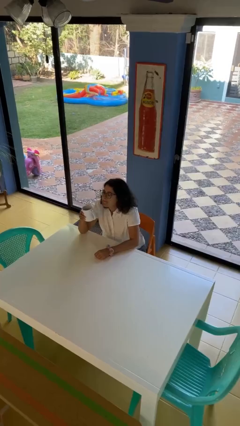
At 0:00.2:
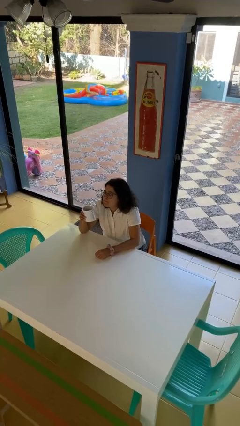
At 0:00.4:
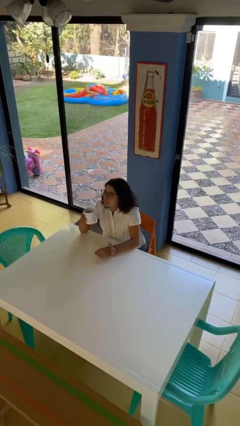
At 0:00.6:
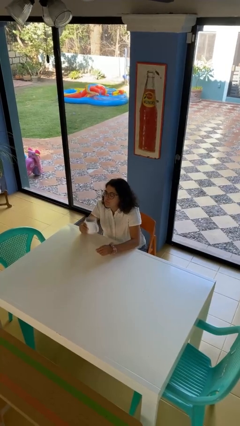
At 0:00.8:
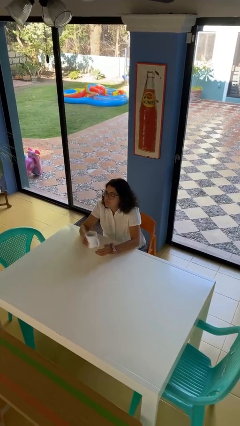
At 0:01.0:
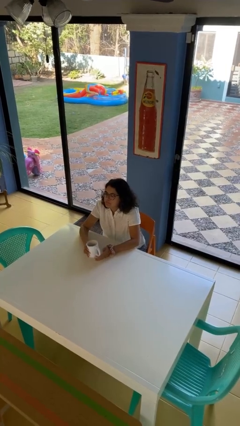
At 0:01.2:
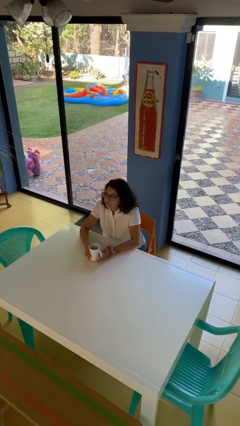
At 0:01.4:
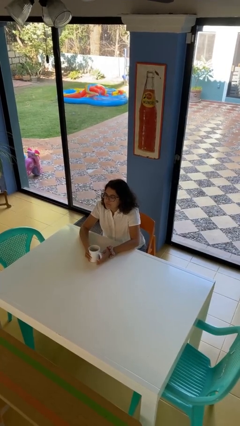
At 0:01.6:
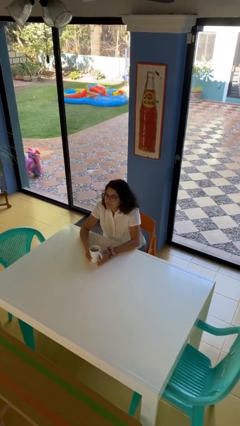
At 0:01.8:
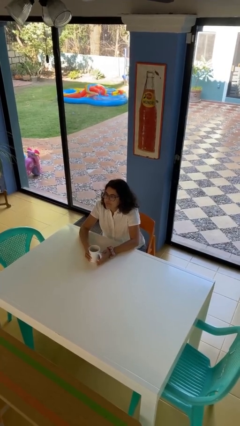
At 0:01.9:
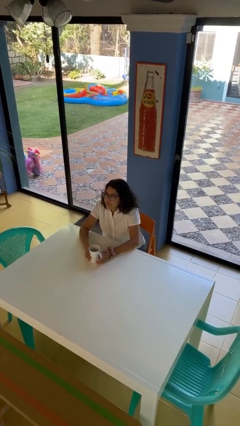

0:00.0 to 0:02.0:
person puts down object on table

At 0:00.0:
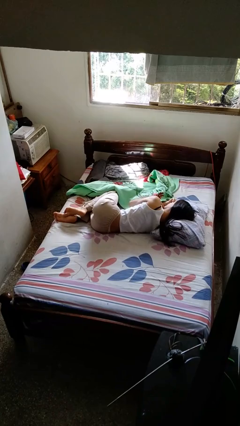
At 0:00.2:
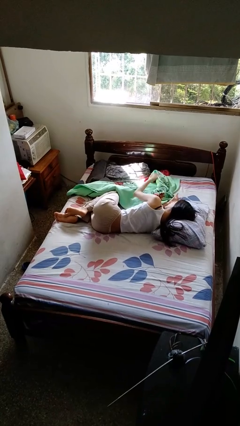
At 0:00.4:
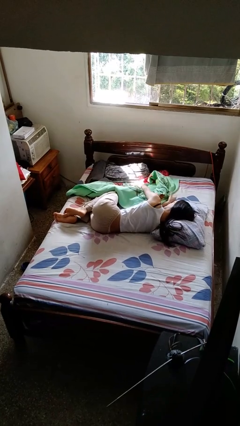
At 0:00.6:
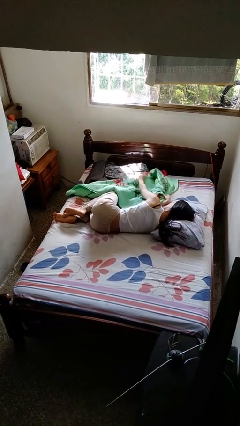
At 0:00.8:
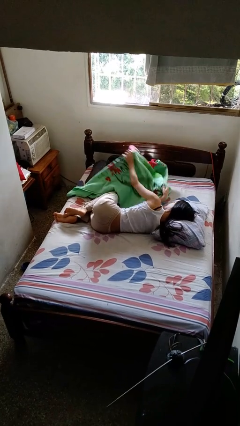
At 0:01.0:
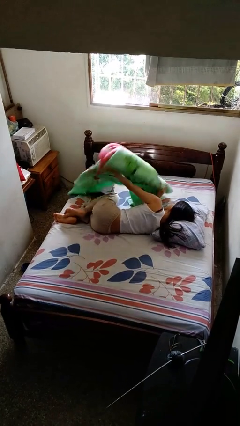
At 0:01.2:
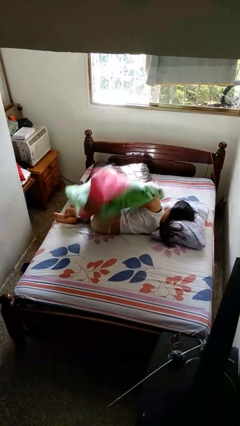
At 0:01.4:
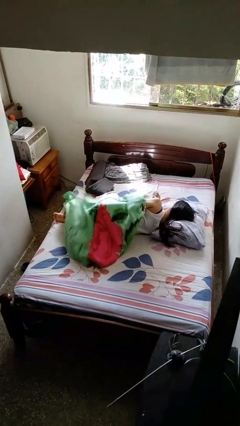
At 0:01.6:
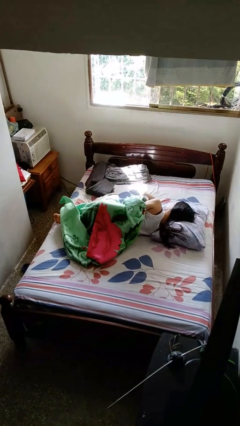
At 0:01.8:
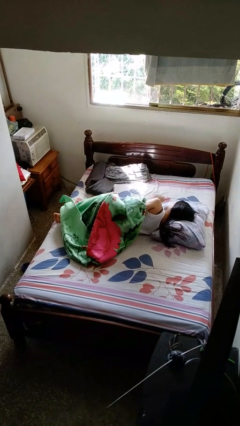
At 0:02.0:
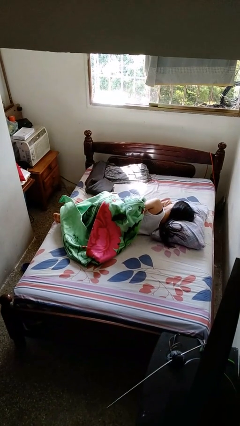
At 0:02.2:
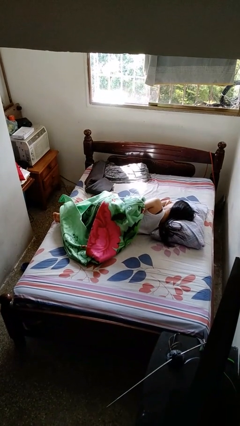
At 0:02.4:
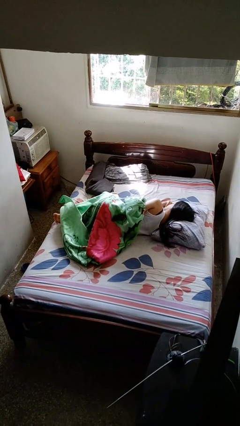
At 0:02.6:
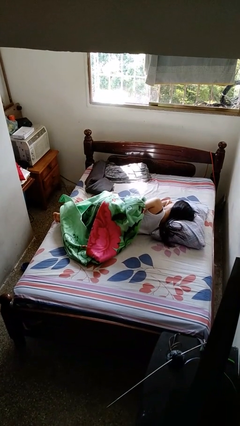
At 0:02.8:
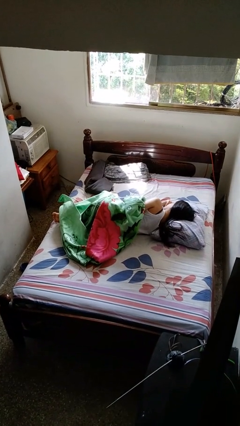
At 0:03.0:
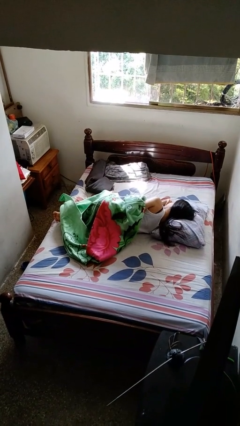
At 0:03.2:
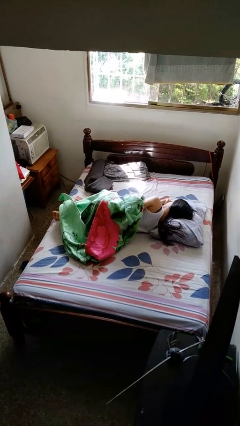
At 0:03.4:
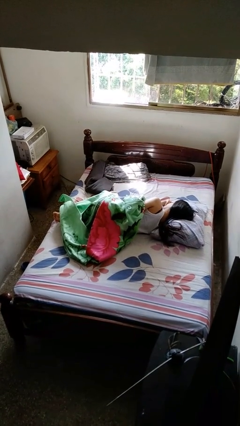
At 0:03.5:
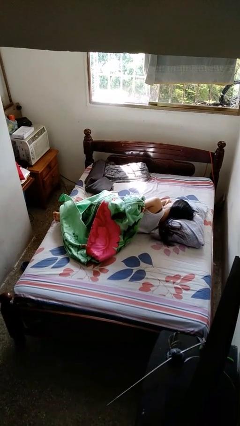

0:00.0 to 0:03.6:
person covers with bedsheets

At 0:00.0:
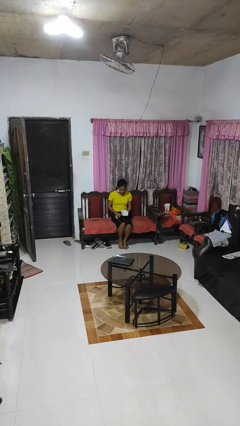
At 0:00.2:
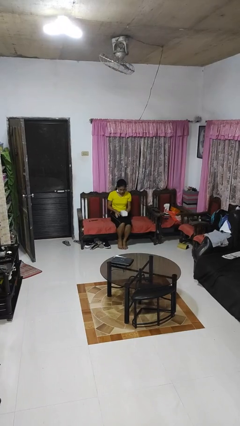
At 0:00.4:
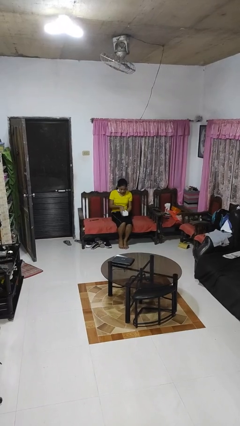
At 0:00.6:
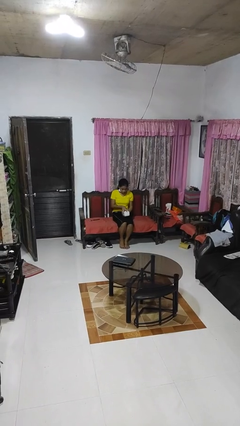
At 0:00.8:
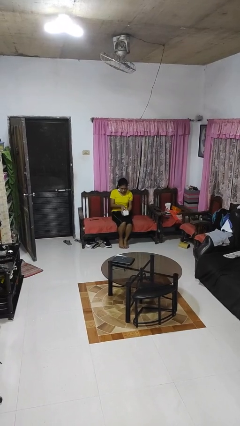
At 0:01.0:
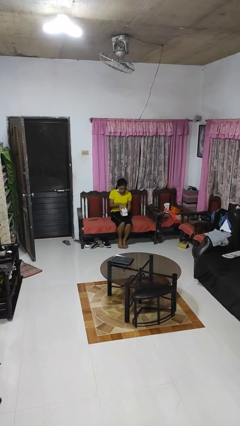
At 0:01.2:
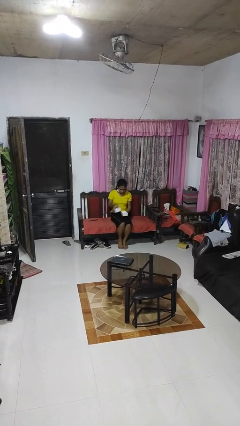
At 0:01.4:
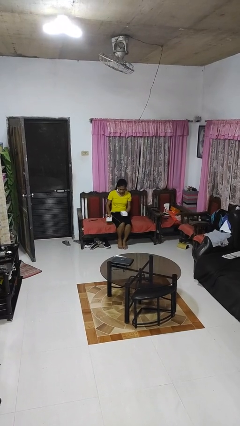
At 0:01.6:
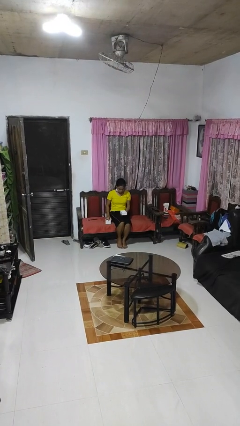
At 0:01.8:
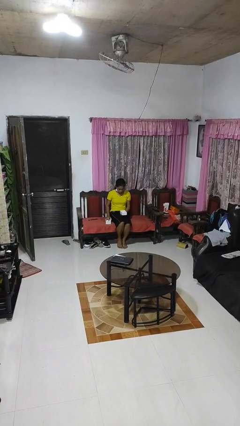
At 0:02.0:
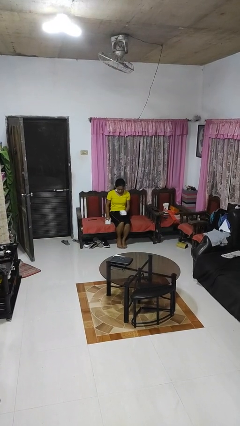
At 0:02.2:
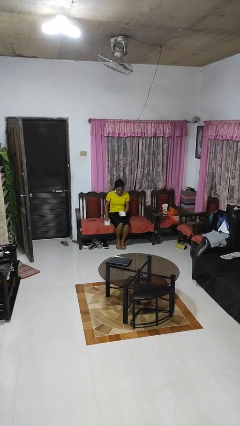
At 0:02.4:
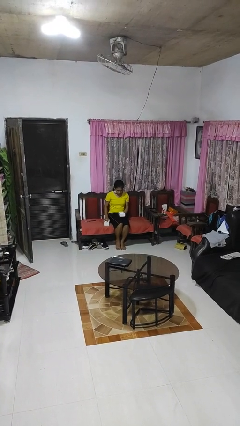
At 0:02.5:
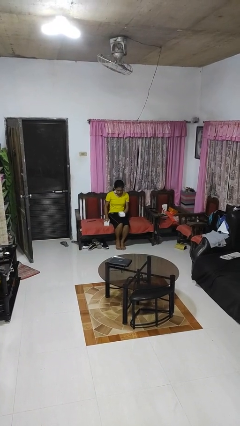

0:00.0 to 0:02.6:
person opens jewelry box

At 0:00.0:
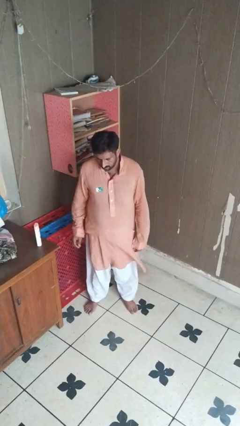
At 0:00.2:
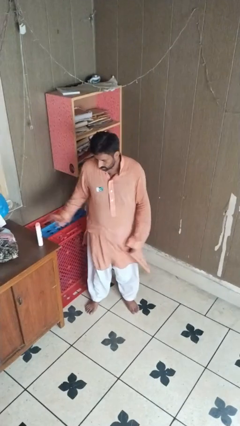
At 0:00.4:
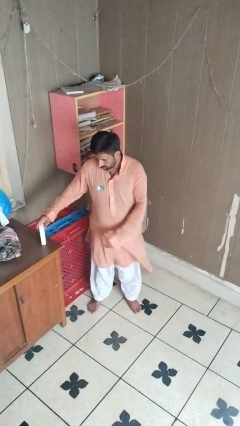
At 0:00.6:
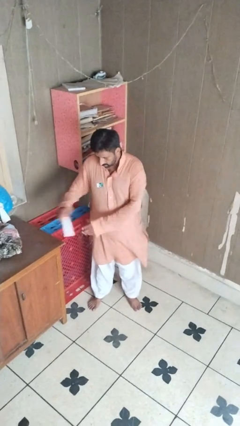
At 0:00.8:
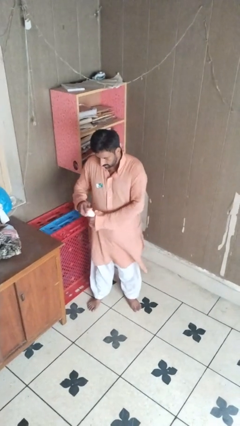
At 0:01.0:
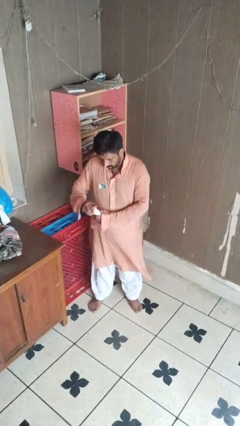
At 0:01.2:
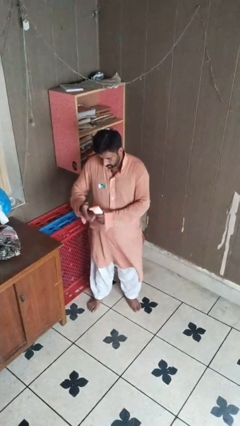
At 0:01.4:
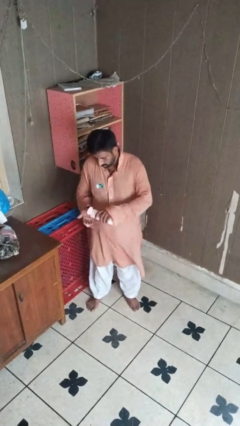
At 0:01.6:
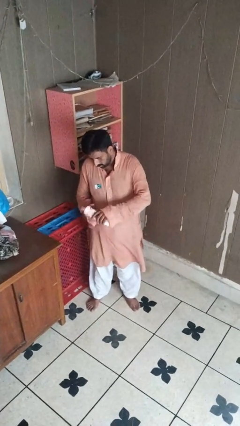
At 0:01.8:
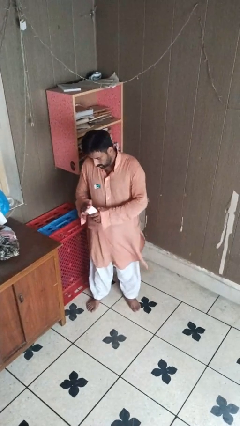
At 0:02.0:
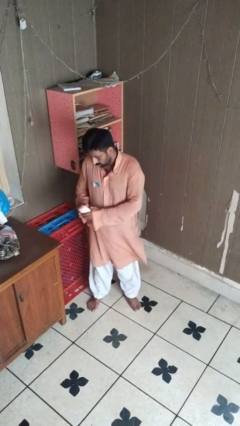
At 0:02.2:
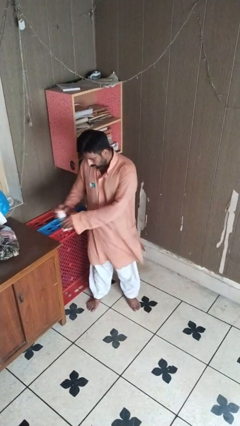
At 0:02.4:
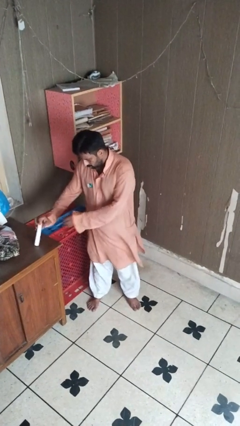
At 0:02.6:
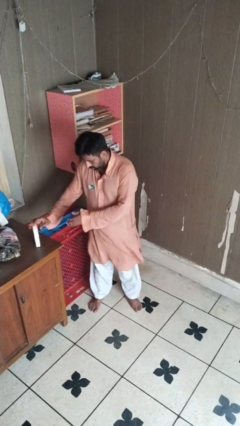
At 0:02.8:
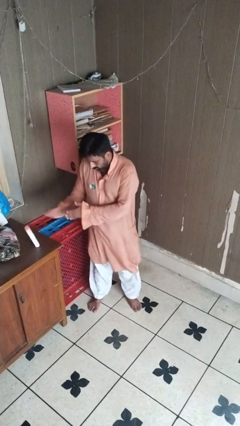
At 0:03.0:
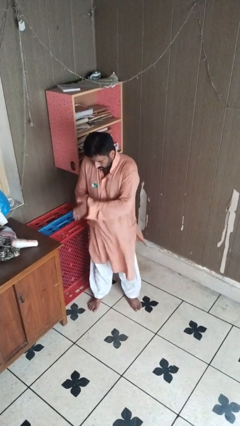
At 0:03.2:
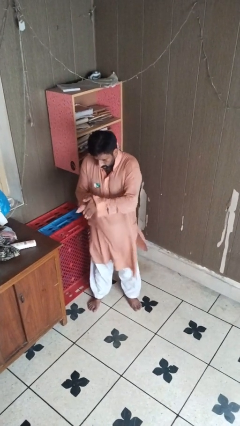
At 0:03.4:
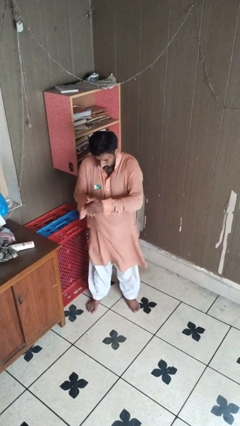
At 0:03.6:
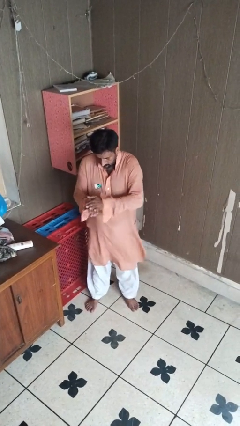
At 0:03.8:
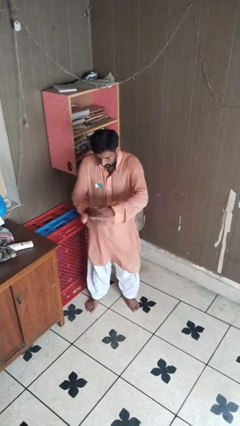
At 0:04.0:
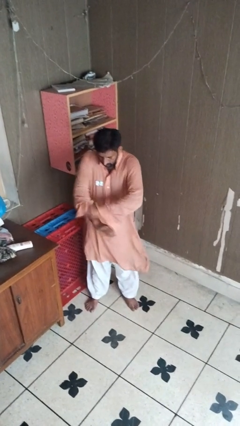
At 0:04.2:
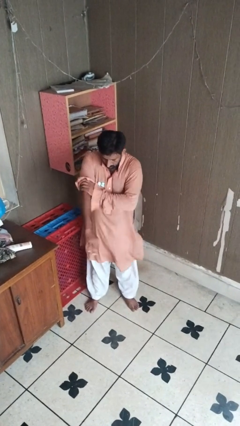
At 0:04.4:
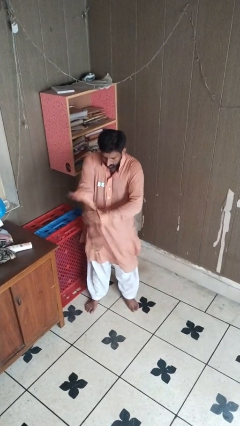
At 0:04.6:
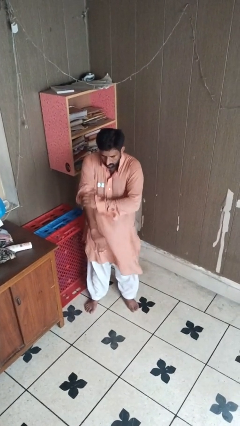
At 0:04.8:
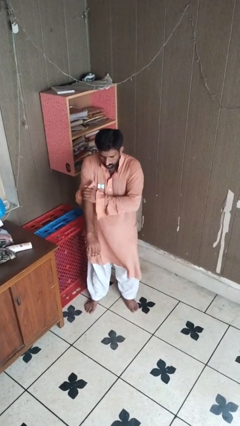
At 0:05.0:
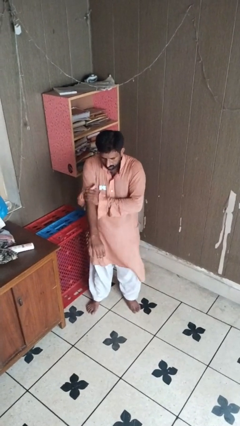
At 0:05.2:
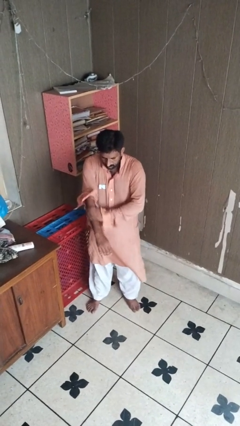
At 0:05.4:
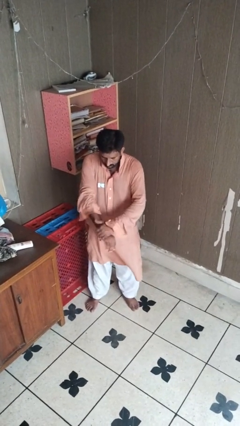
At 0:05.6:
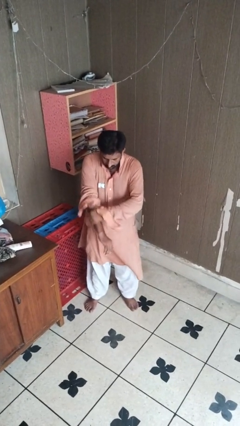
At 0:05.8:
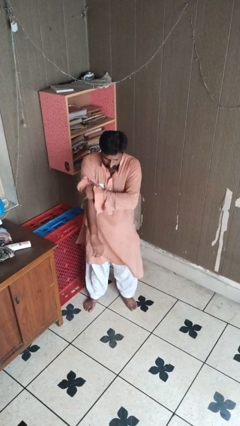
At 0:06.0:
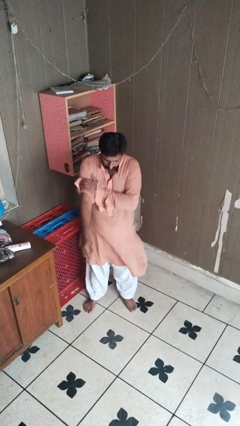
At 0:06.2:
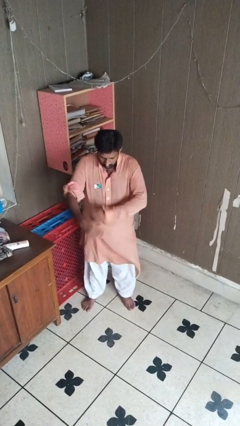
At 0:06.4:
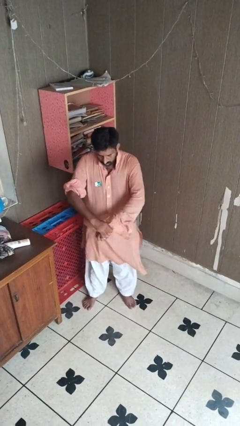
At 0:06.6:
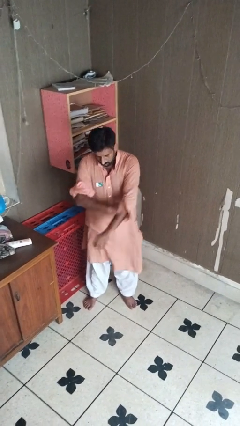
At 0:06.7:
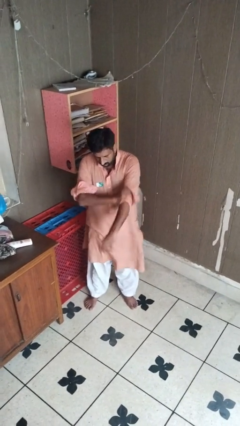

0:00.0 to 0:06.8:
person applies facial moisturizer

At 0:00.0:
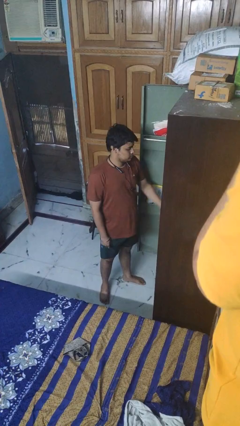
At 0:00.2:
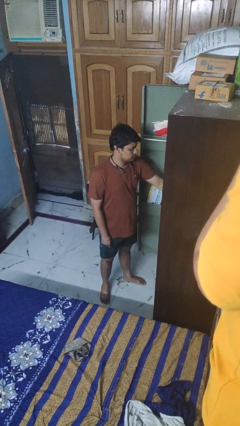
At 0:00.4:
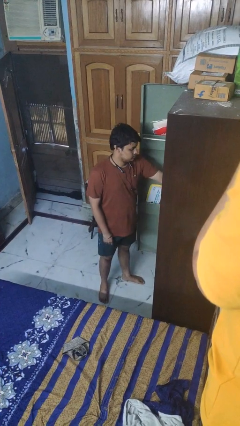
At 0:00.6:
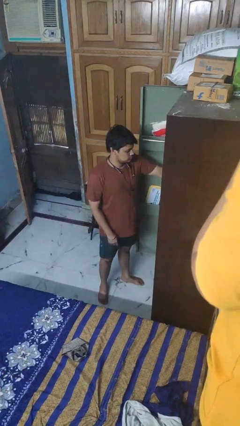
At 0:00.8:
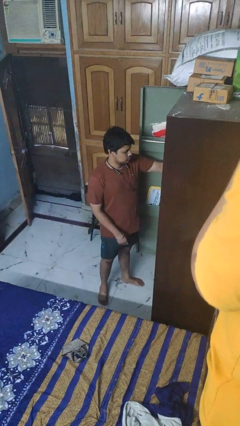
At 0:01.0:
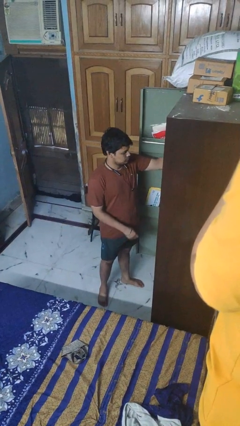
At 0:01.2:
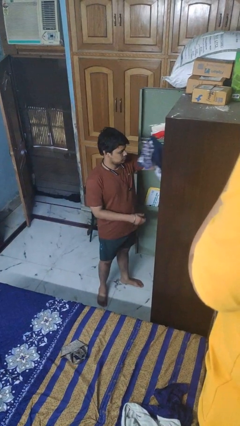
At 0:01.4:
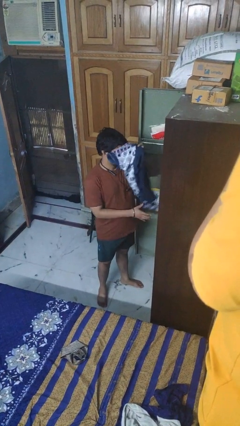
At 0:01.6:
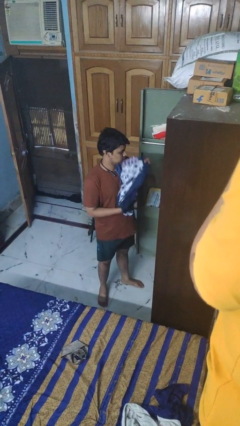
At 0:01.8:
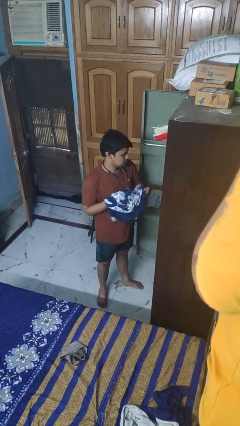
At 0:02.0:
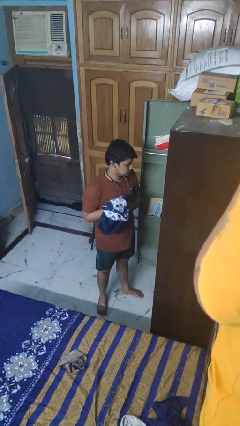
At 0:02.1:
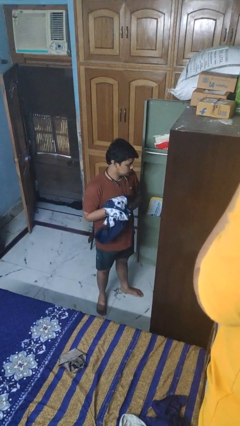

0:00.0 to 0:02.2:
person takes clothes from dresser

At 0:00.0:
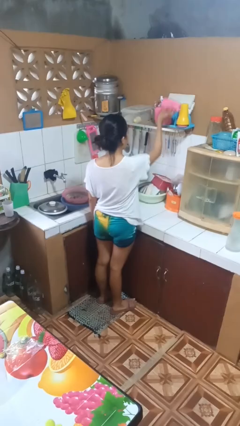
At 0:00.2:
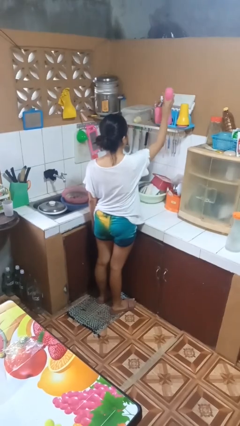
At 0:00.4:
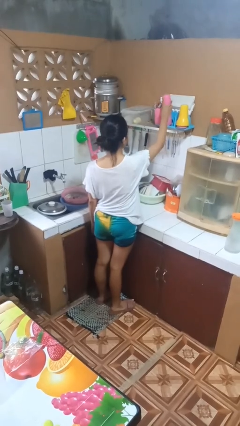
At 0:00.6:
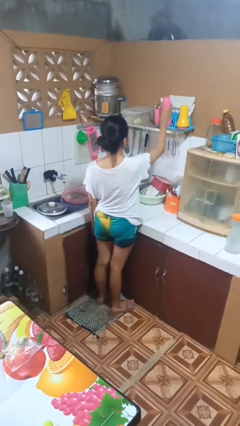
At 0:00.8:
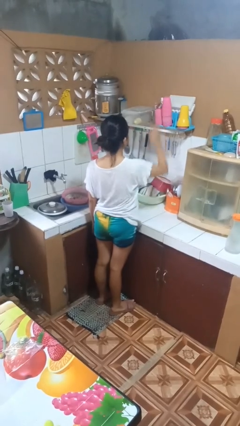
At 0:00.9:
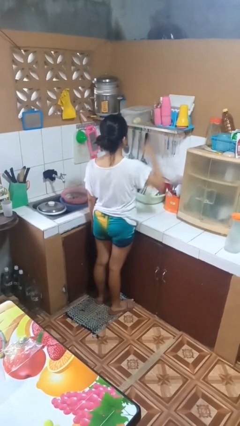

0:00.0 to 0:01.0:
person puts down object on shelf
